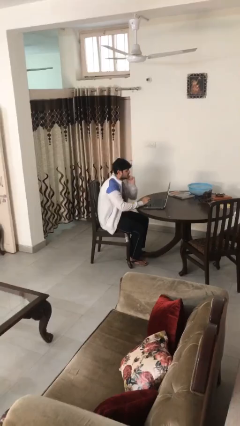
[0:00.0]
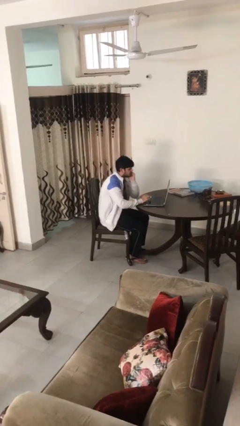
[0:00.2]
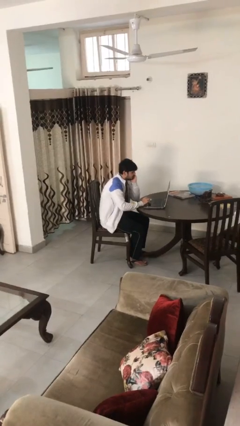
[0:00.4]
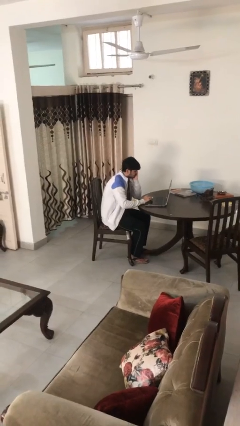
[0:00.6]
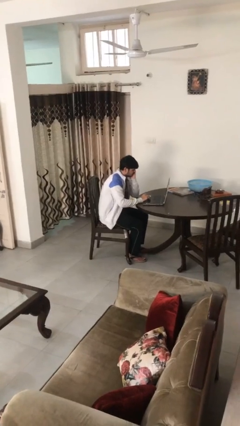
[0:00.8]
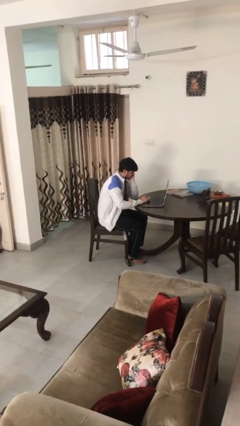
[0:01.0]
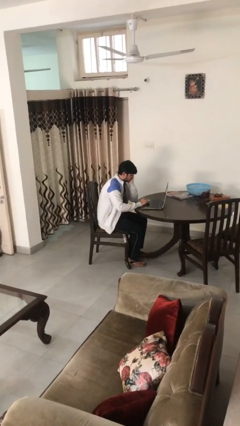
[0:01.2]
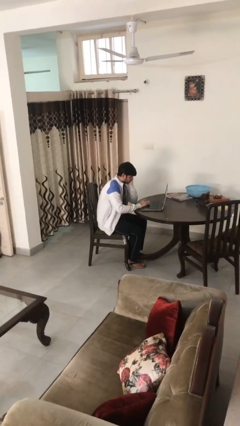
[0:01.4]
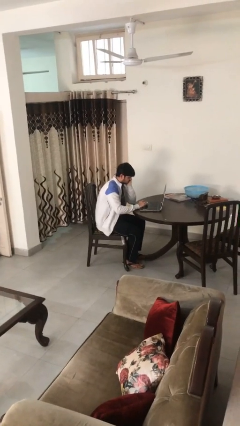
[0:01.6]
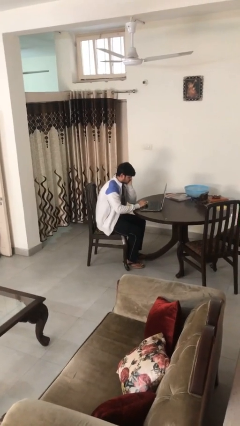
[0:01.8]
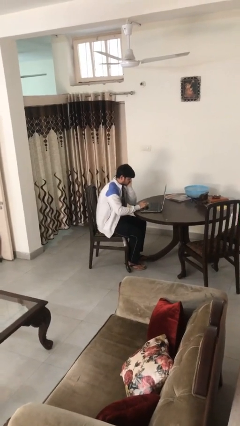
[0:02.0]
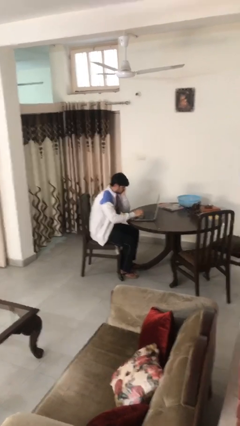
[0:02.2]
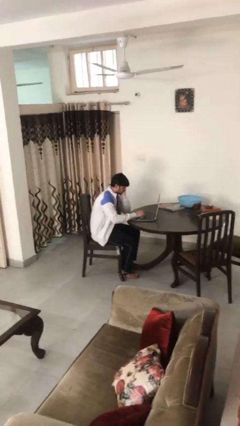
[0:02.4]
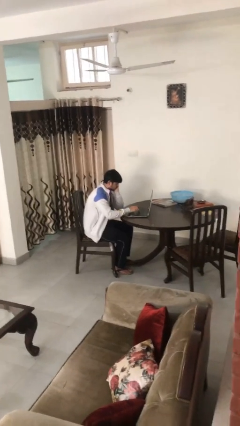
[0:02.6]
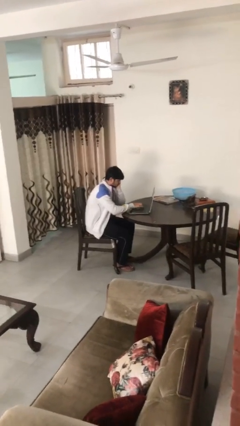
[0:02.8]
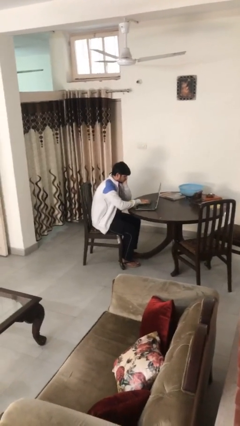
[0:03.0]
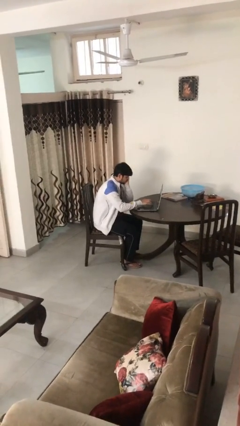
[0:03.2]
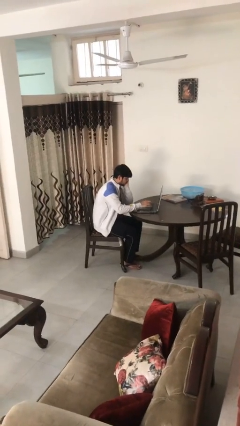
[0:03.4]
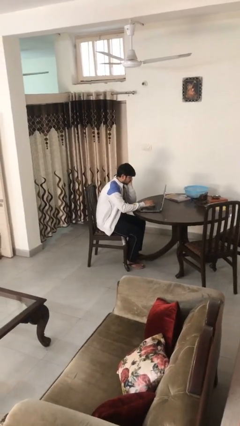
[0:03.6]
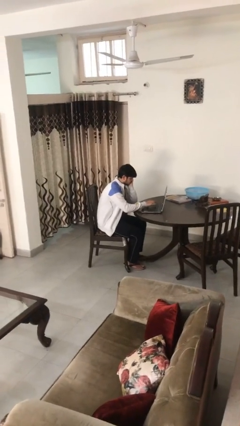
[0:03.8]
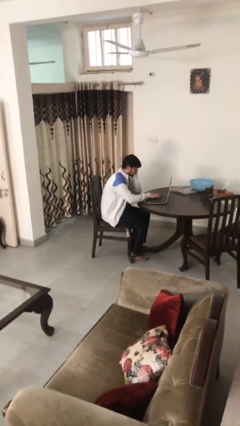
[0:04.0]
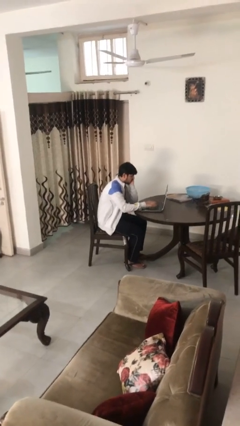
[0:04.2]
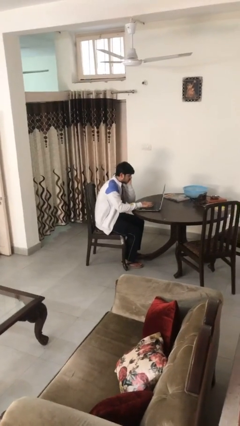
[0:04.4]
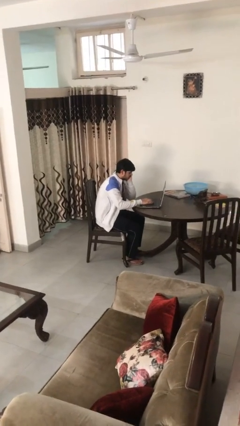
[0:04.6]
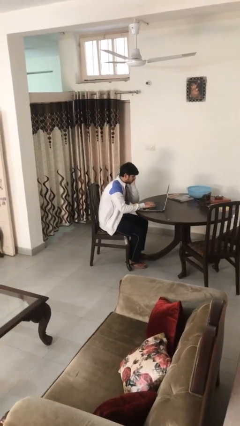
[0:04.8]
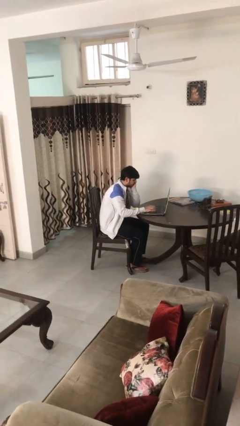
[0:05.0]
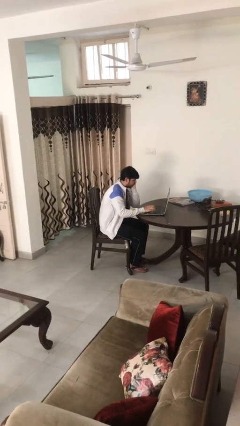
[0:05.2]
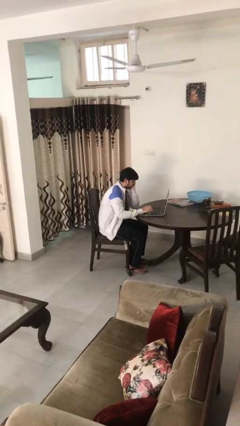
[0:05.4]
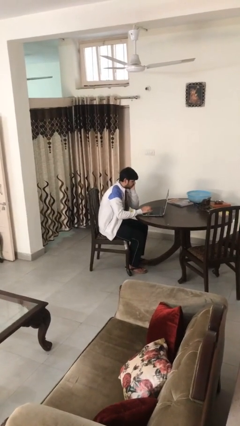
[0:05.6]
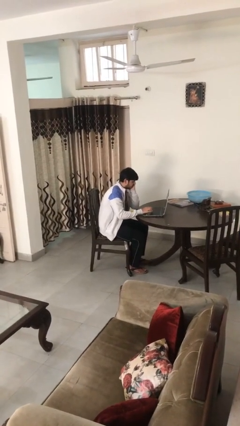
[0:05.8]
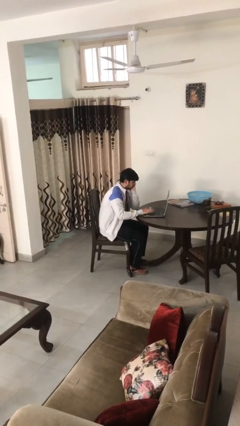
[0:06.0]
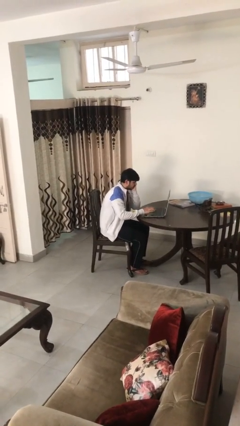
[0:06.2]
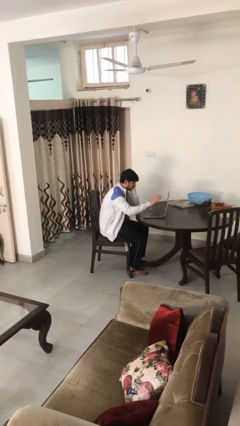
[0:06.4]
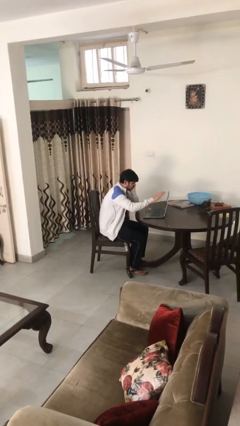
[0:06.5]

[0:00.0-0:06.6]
person interacts with laptop

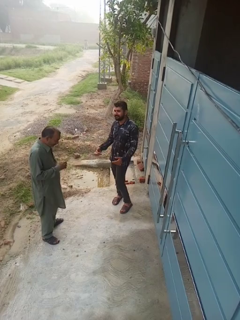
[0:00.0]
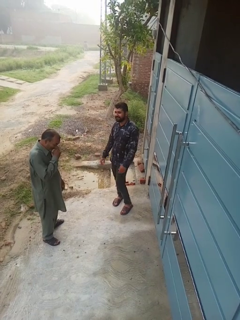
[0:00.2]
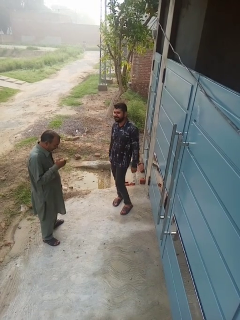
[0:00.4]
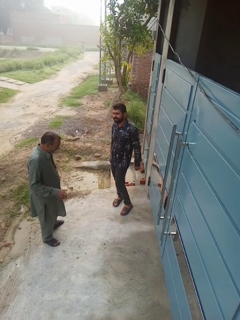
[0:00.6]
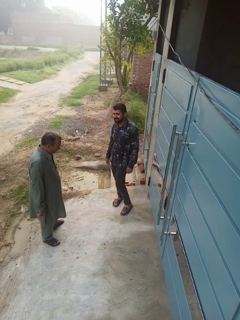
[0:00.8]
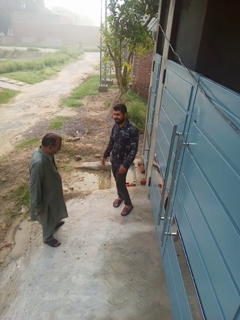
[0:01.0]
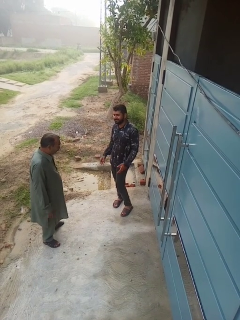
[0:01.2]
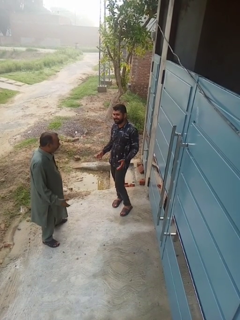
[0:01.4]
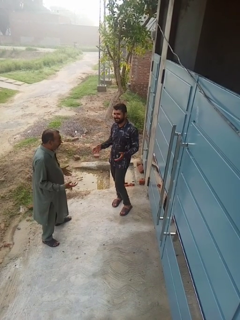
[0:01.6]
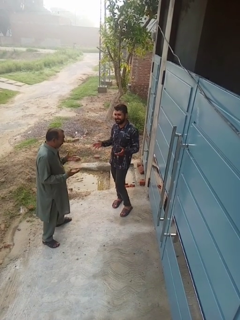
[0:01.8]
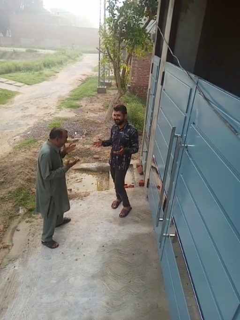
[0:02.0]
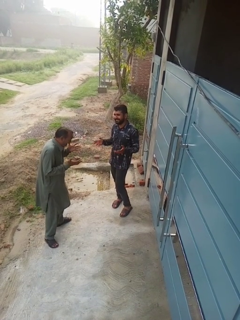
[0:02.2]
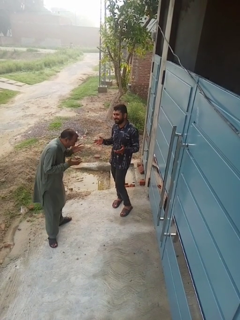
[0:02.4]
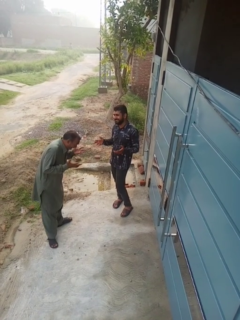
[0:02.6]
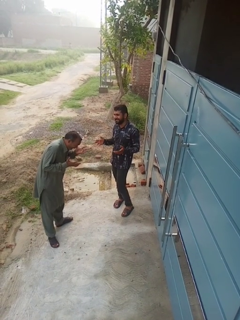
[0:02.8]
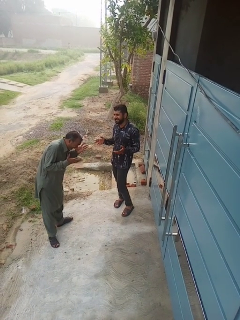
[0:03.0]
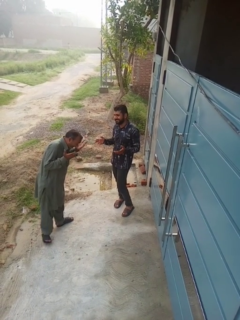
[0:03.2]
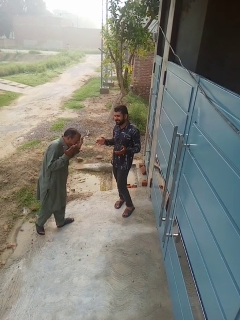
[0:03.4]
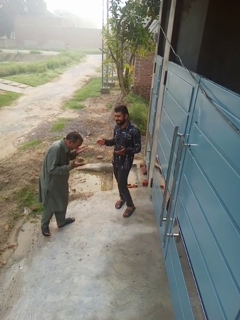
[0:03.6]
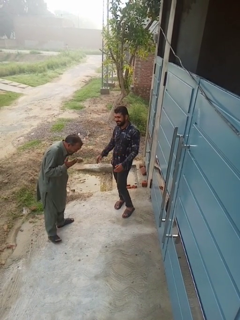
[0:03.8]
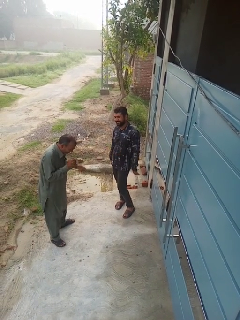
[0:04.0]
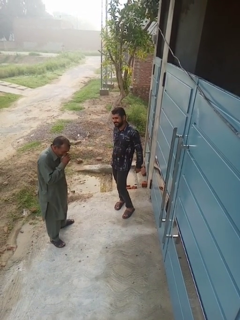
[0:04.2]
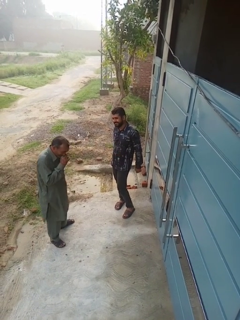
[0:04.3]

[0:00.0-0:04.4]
person laughs with person

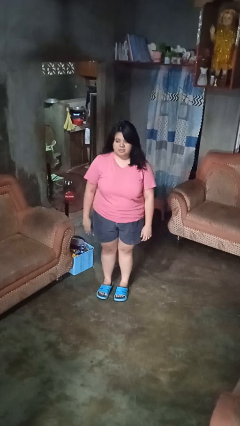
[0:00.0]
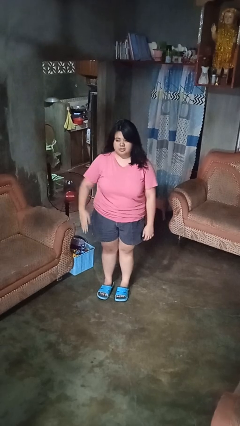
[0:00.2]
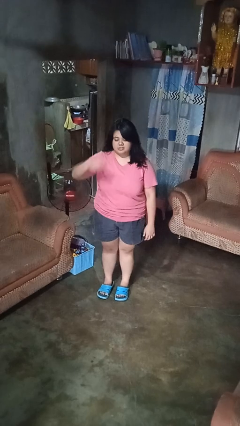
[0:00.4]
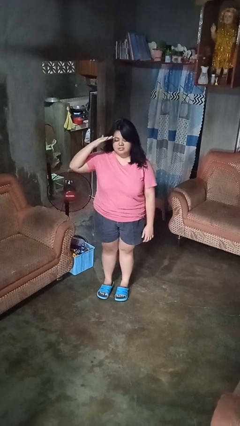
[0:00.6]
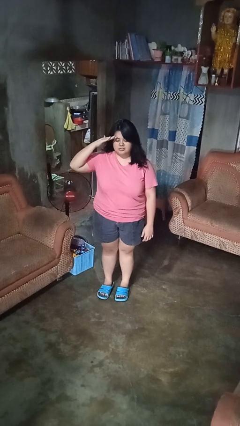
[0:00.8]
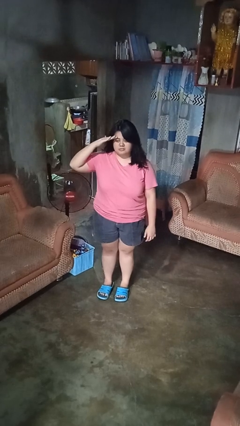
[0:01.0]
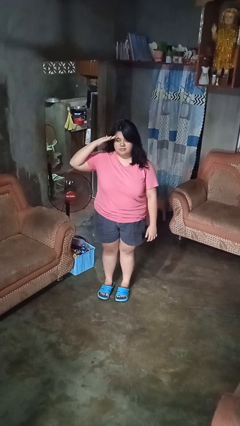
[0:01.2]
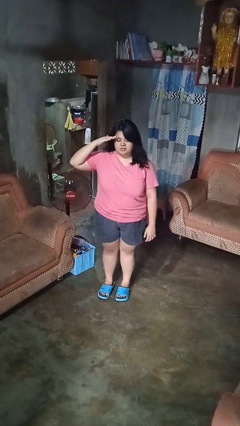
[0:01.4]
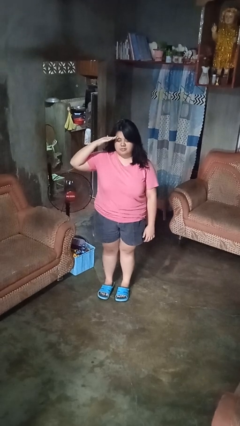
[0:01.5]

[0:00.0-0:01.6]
person salutes

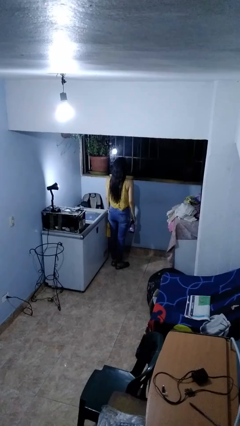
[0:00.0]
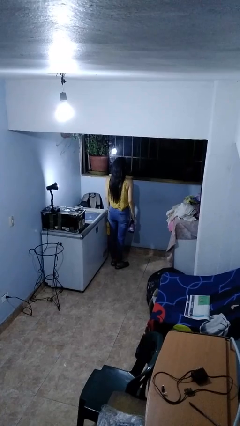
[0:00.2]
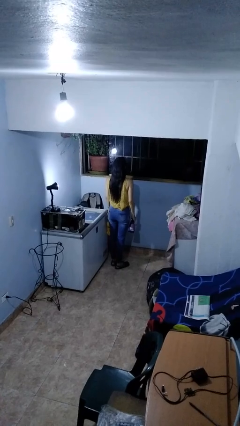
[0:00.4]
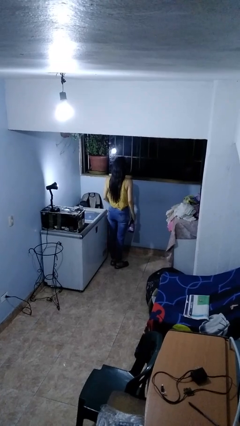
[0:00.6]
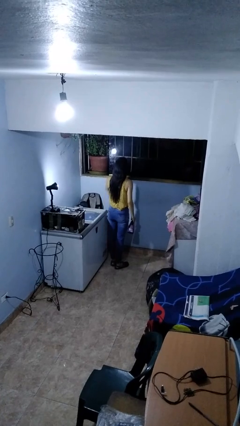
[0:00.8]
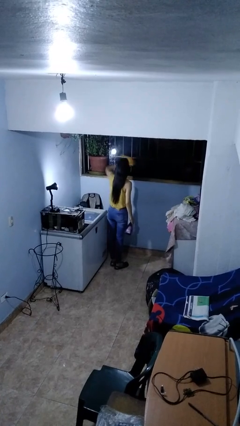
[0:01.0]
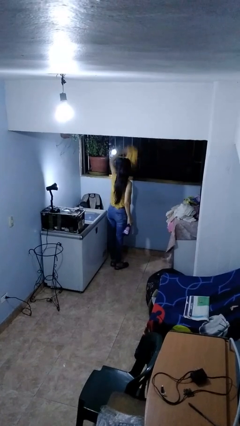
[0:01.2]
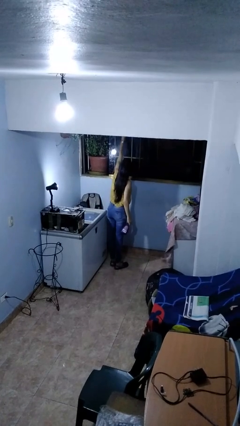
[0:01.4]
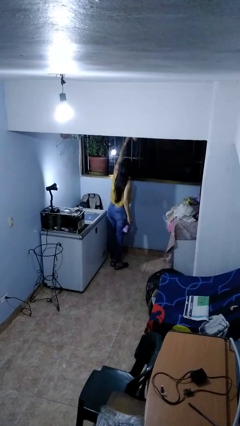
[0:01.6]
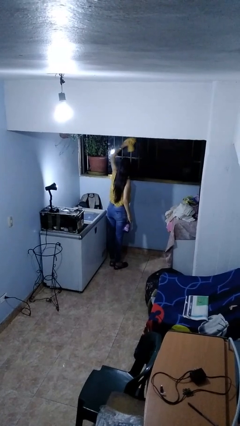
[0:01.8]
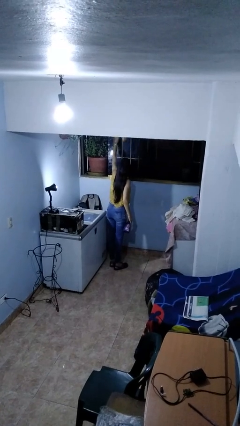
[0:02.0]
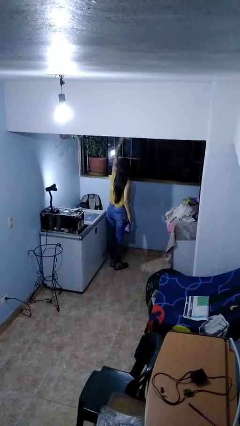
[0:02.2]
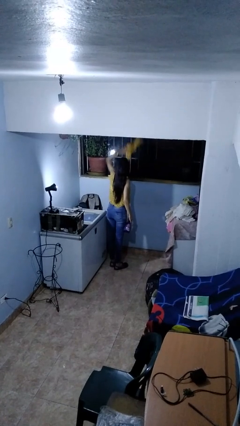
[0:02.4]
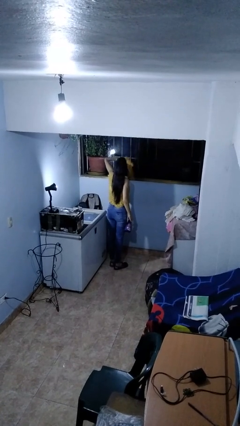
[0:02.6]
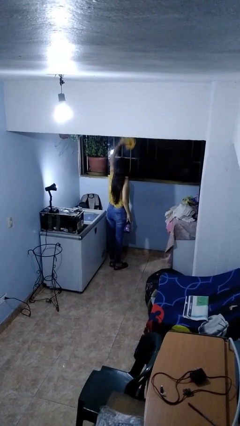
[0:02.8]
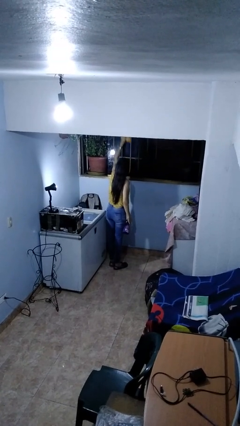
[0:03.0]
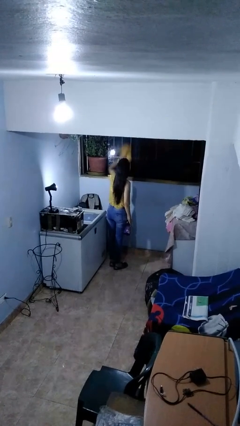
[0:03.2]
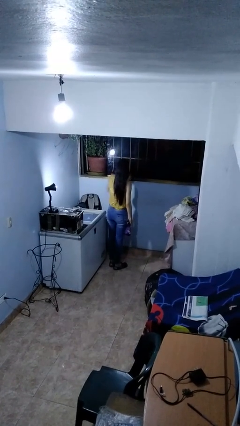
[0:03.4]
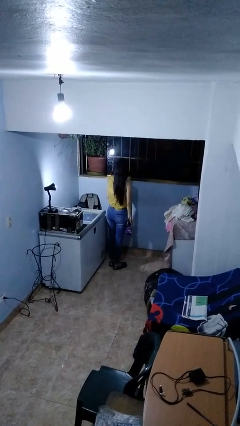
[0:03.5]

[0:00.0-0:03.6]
person washes window

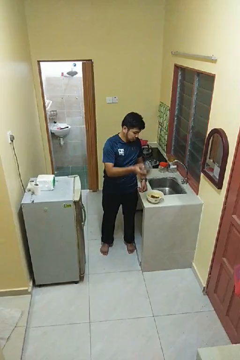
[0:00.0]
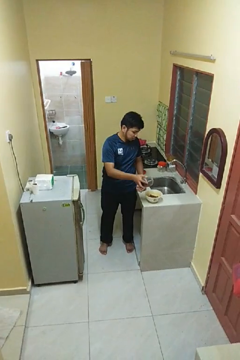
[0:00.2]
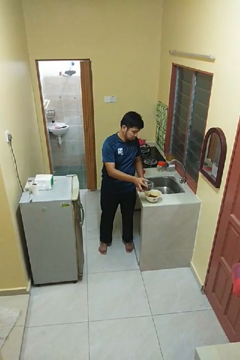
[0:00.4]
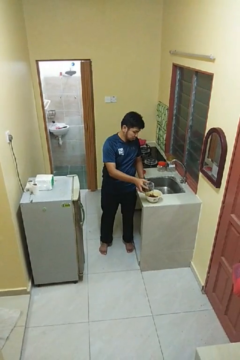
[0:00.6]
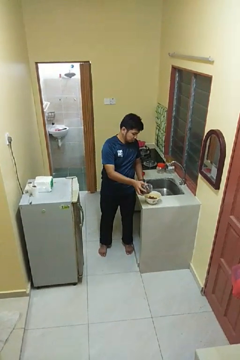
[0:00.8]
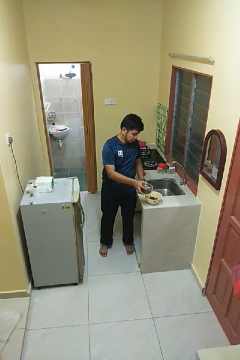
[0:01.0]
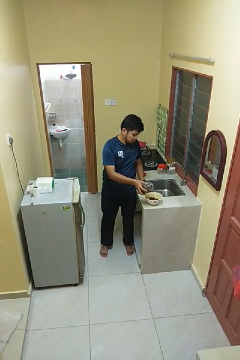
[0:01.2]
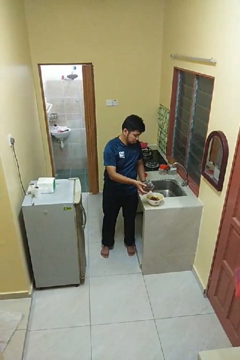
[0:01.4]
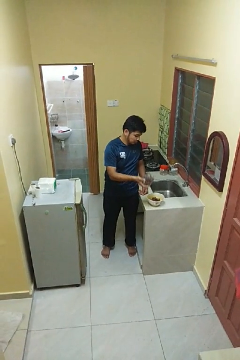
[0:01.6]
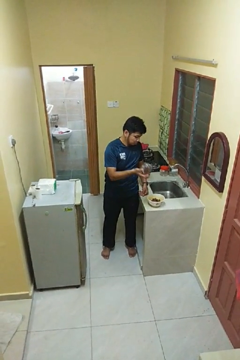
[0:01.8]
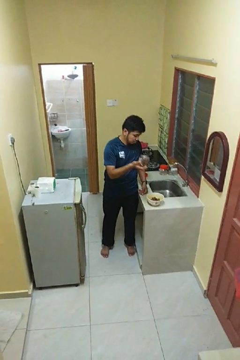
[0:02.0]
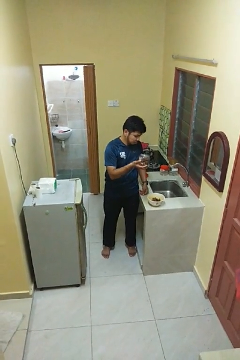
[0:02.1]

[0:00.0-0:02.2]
person pours into bowl

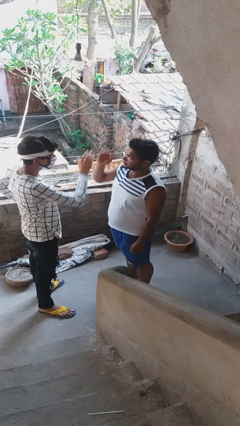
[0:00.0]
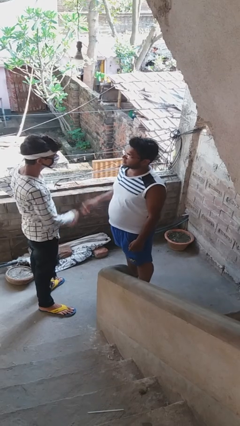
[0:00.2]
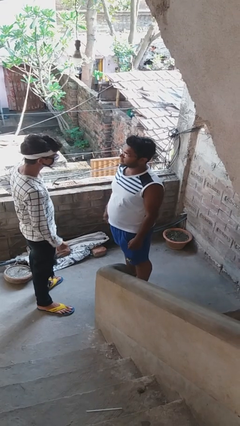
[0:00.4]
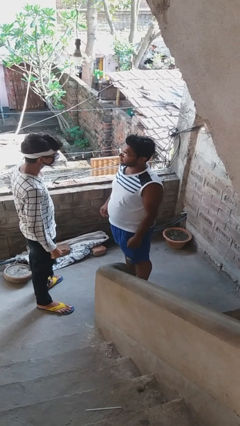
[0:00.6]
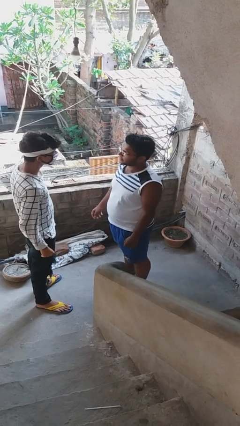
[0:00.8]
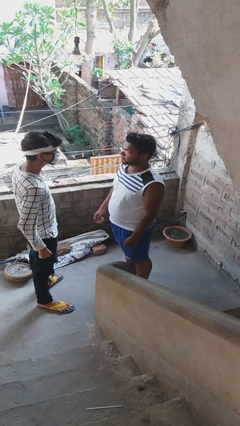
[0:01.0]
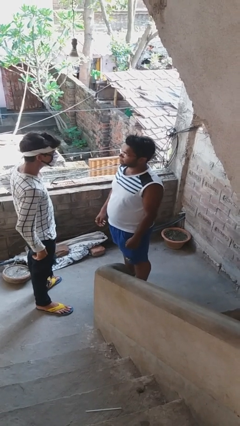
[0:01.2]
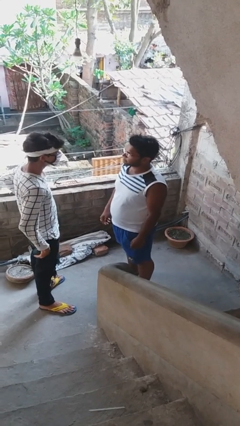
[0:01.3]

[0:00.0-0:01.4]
person highfives hand
